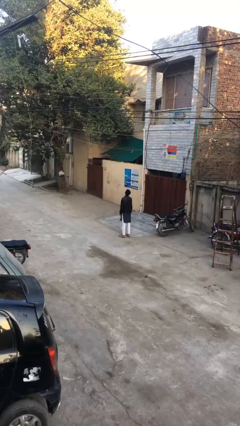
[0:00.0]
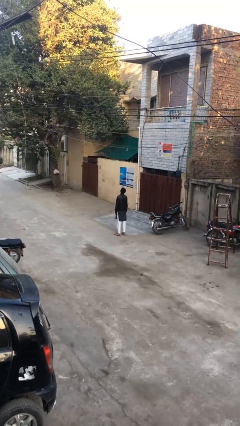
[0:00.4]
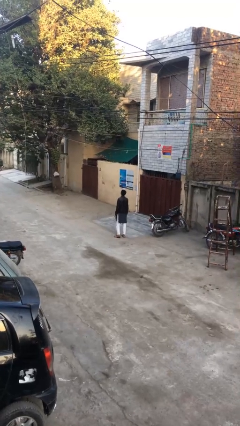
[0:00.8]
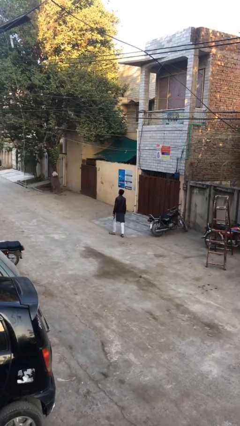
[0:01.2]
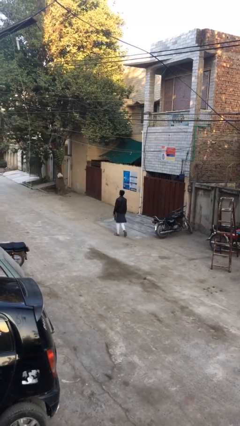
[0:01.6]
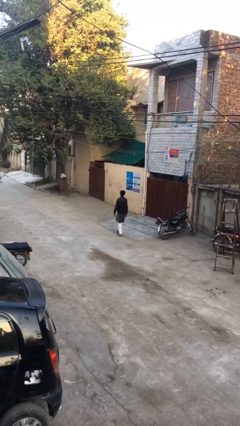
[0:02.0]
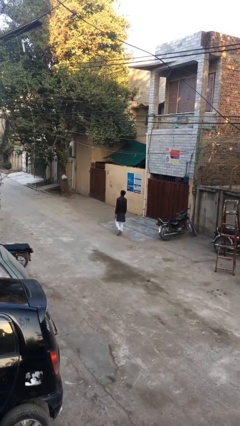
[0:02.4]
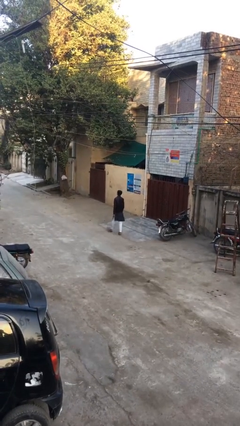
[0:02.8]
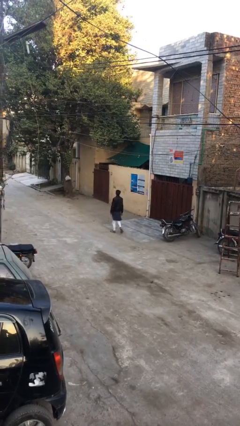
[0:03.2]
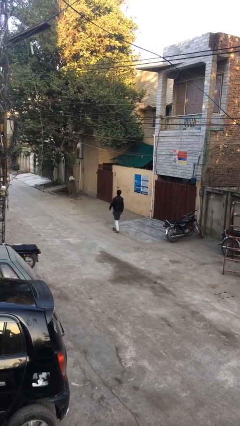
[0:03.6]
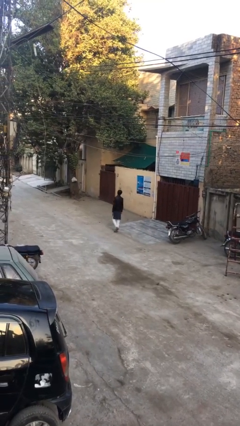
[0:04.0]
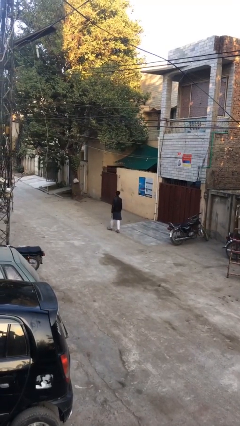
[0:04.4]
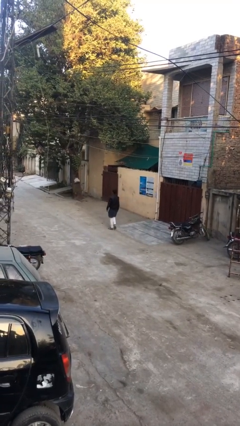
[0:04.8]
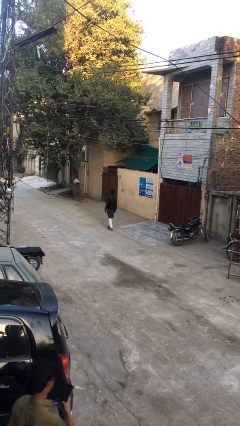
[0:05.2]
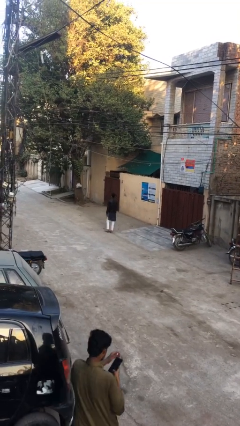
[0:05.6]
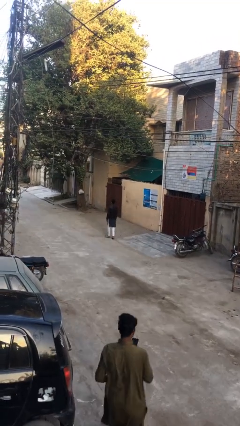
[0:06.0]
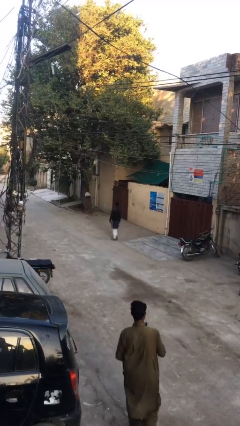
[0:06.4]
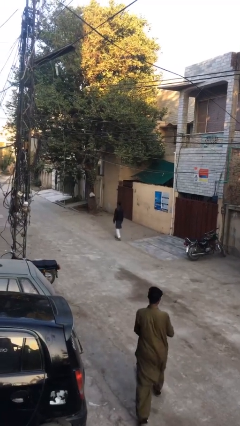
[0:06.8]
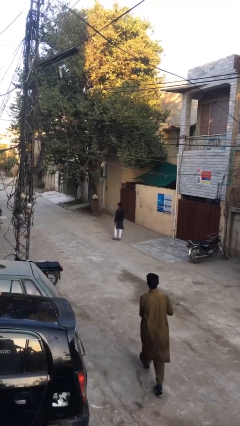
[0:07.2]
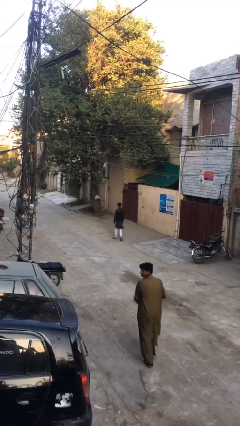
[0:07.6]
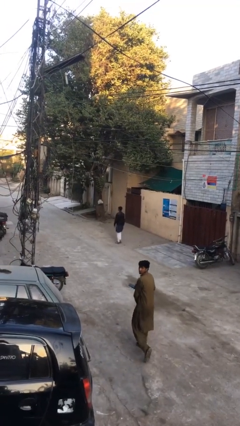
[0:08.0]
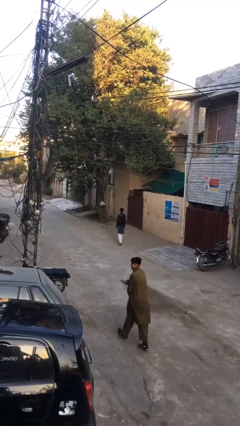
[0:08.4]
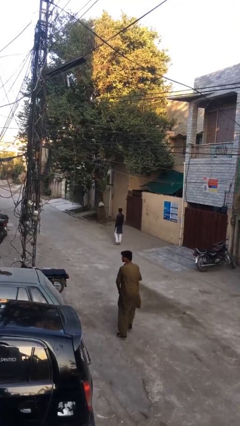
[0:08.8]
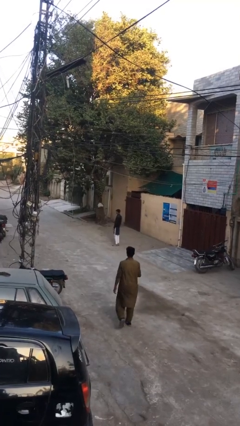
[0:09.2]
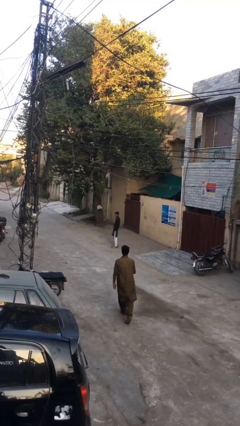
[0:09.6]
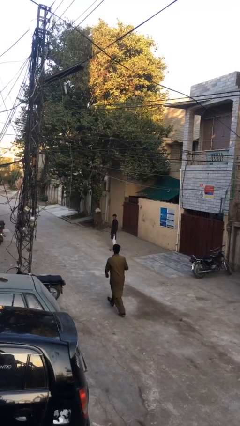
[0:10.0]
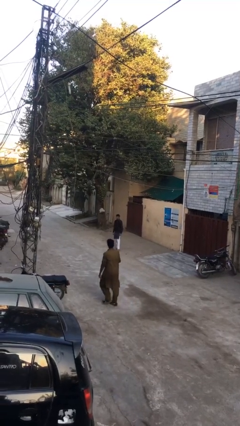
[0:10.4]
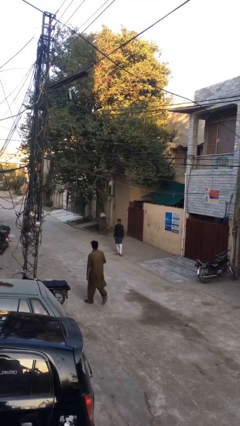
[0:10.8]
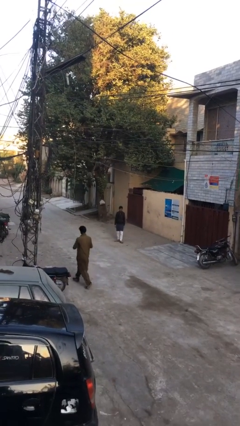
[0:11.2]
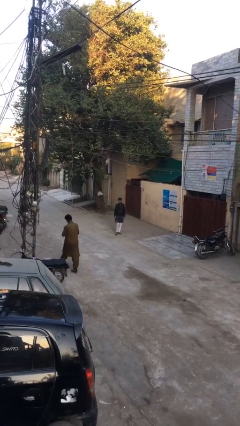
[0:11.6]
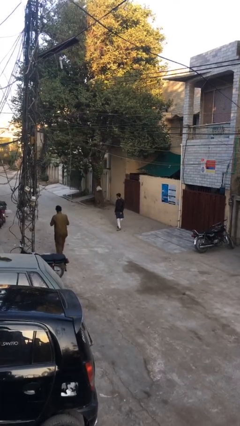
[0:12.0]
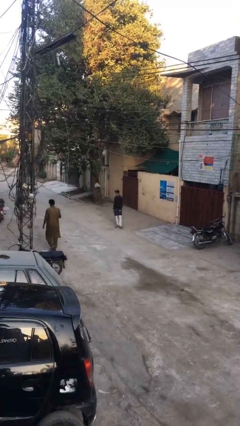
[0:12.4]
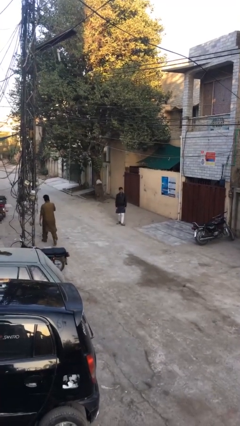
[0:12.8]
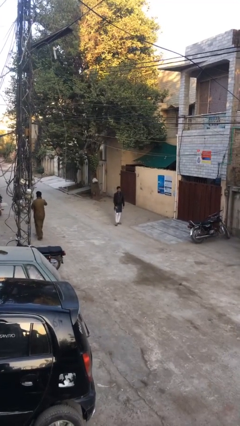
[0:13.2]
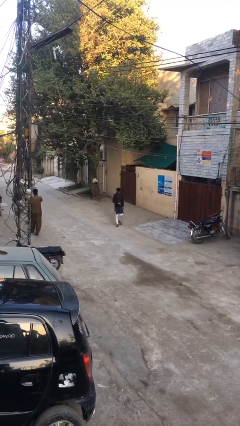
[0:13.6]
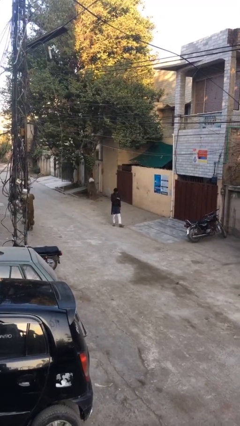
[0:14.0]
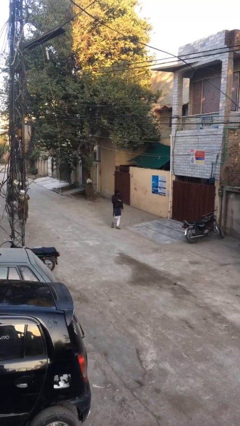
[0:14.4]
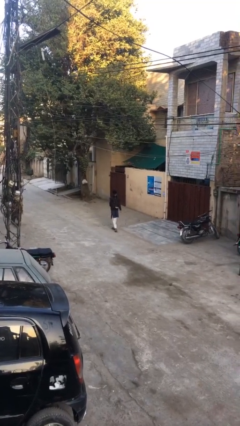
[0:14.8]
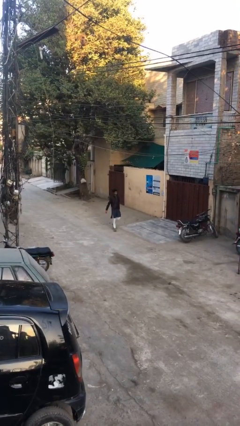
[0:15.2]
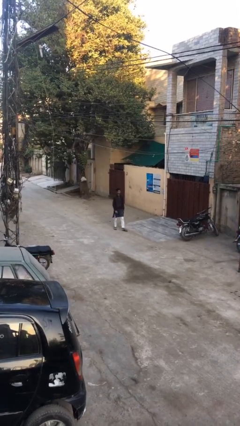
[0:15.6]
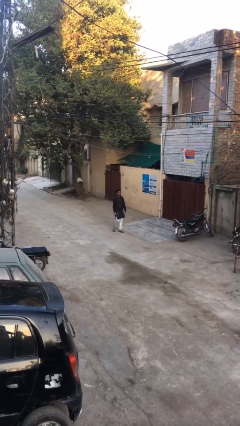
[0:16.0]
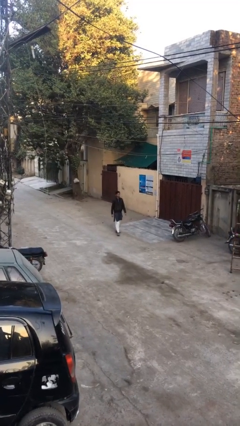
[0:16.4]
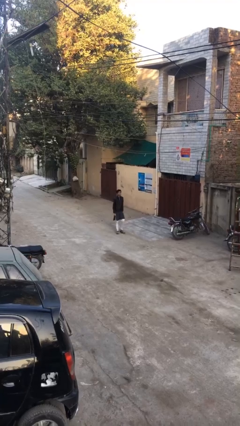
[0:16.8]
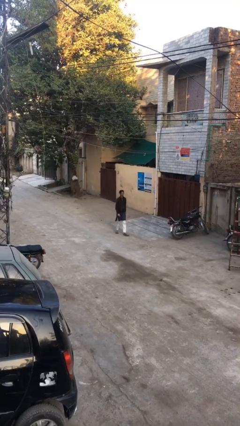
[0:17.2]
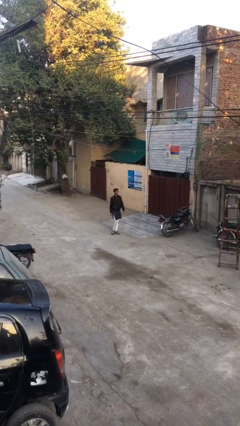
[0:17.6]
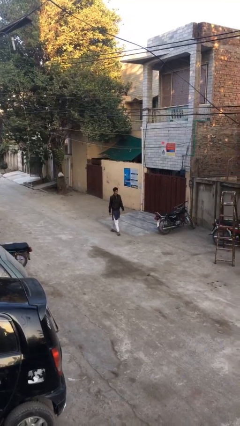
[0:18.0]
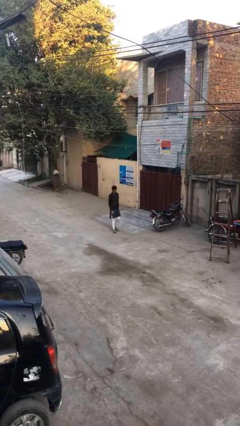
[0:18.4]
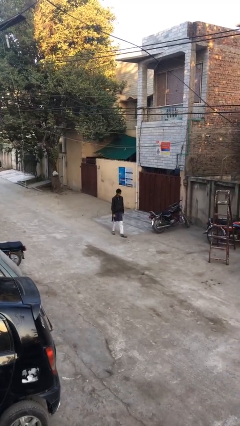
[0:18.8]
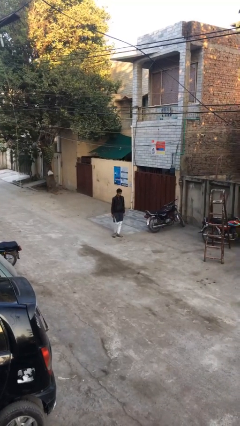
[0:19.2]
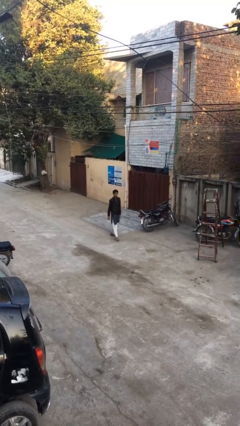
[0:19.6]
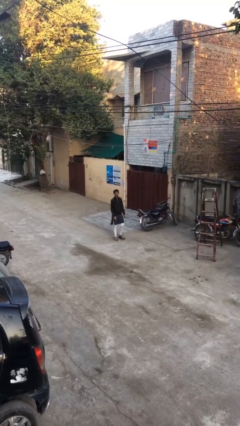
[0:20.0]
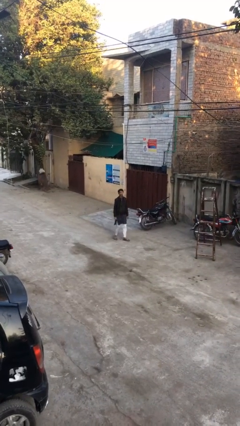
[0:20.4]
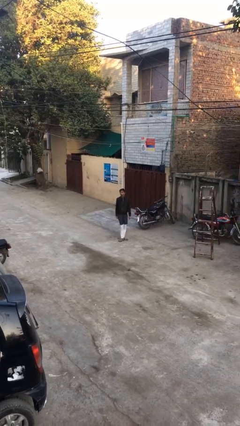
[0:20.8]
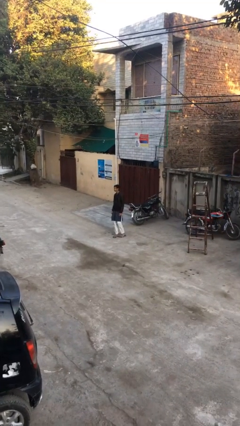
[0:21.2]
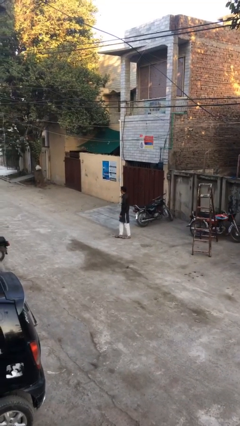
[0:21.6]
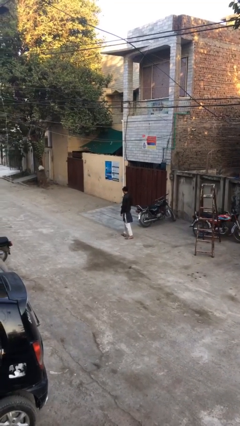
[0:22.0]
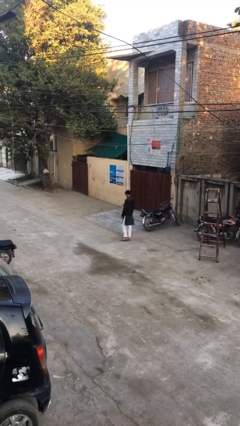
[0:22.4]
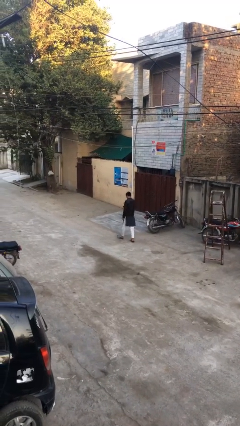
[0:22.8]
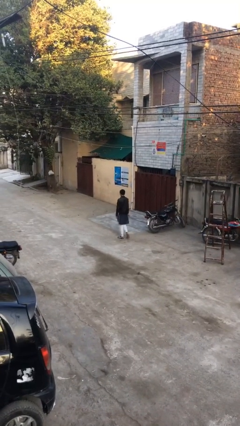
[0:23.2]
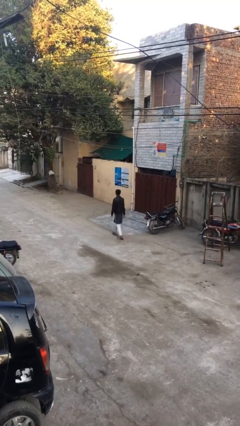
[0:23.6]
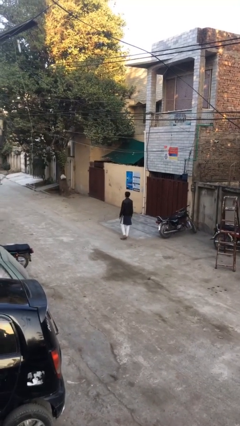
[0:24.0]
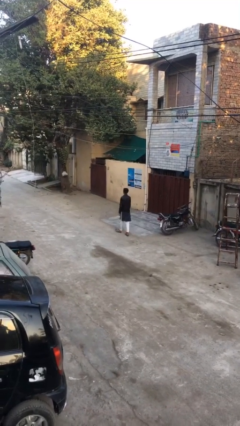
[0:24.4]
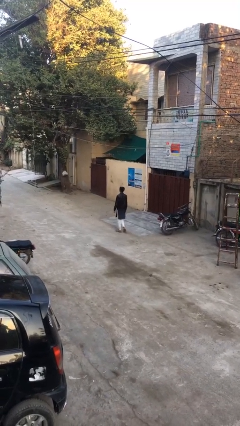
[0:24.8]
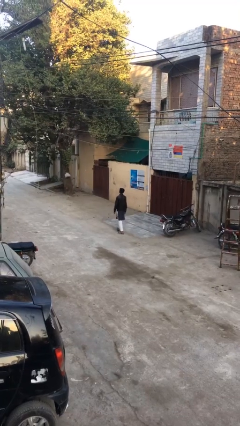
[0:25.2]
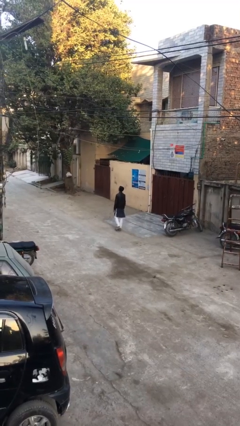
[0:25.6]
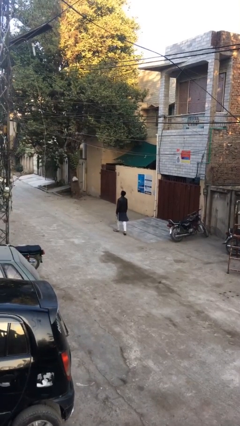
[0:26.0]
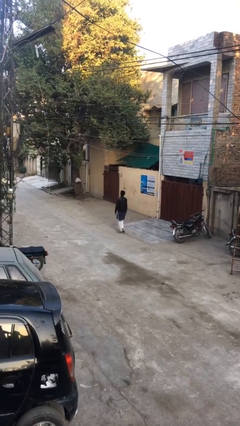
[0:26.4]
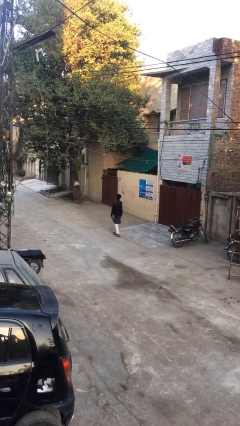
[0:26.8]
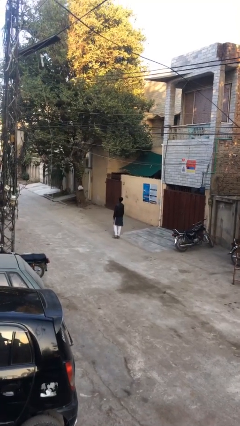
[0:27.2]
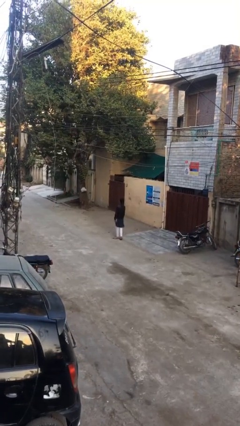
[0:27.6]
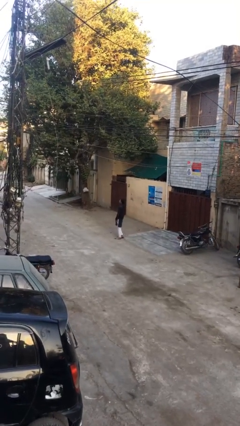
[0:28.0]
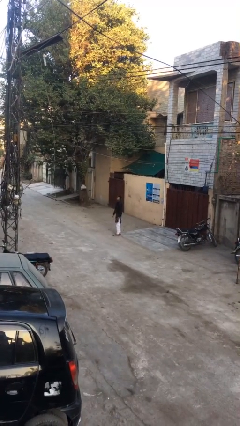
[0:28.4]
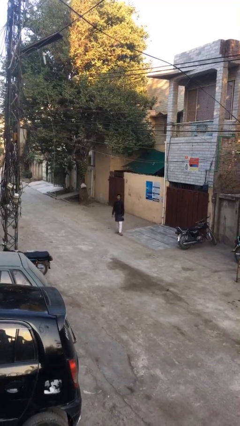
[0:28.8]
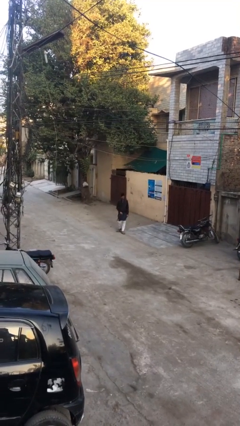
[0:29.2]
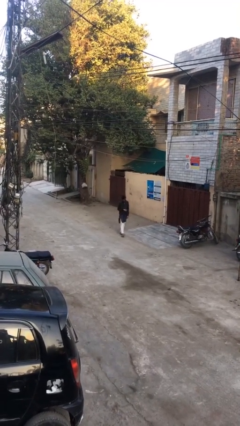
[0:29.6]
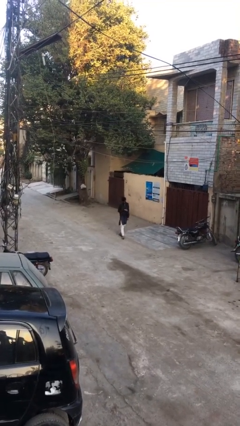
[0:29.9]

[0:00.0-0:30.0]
person walks

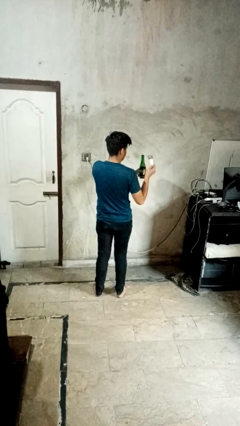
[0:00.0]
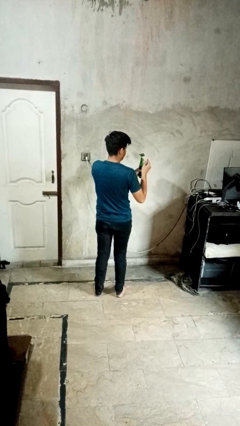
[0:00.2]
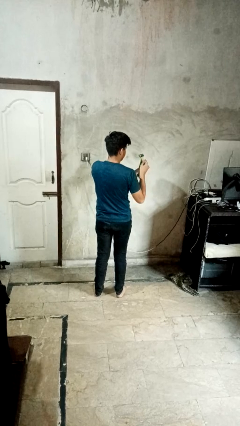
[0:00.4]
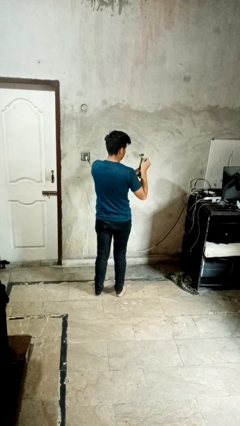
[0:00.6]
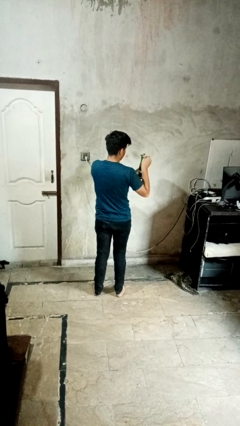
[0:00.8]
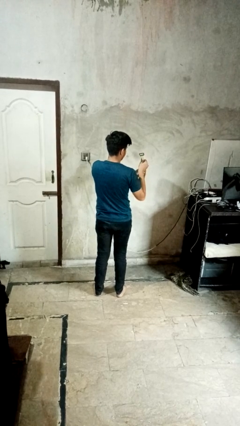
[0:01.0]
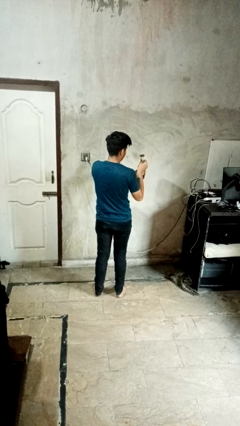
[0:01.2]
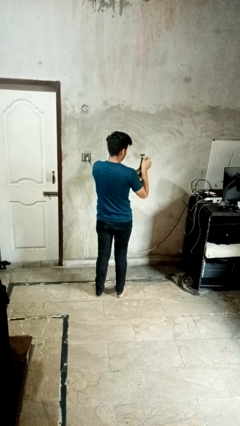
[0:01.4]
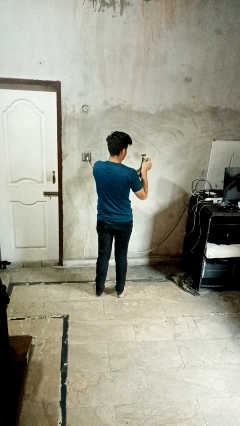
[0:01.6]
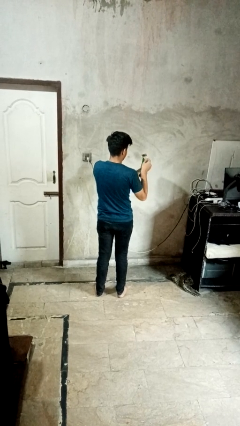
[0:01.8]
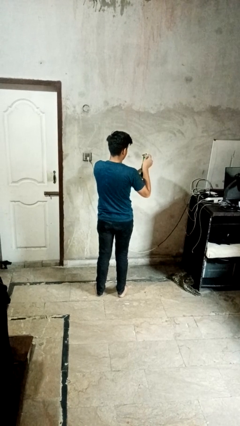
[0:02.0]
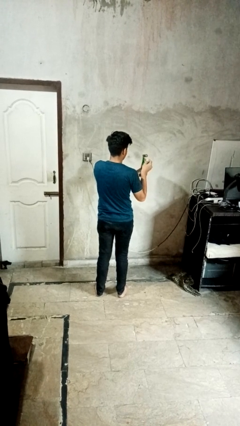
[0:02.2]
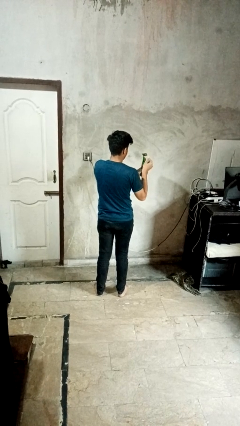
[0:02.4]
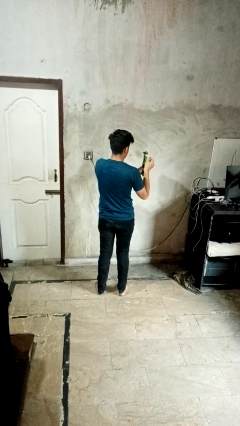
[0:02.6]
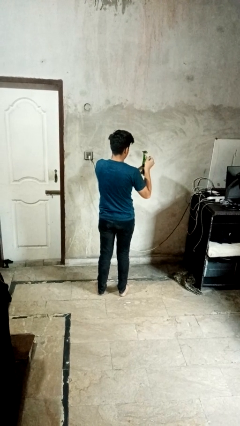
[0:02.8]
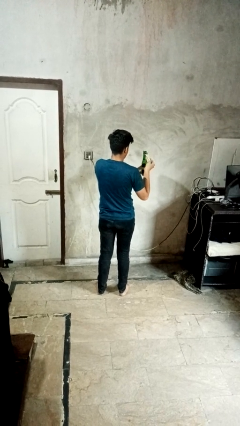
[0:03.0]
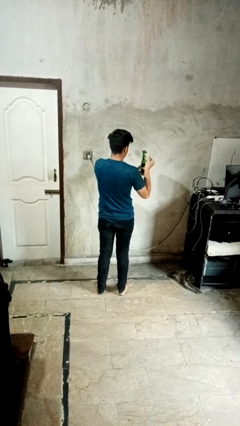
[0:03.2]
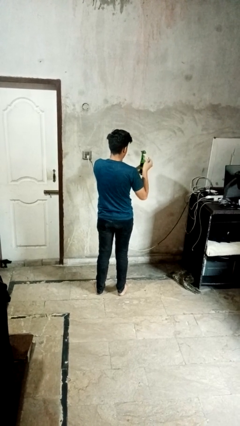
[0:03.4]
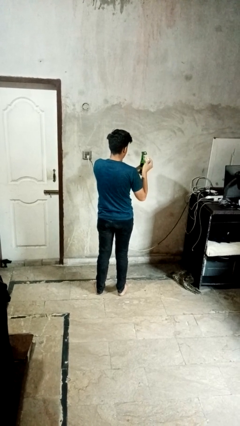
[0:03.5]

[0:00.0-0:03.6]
person opens can with can opener
